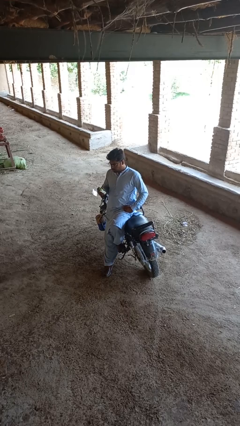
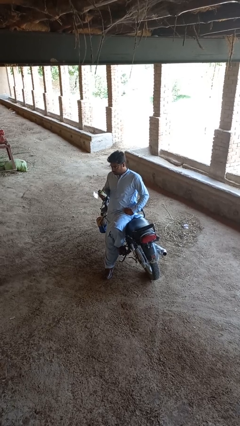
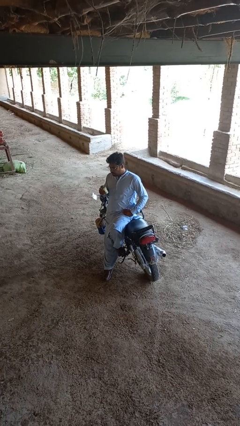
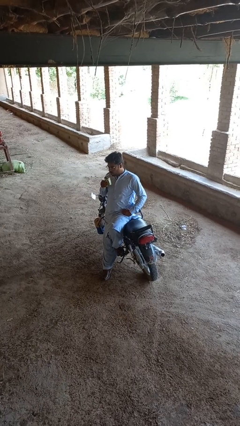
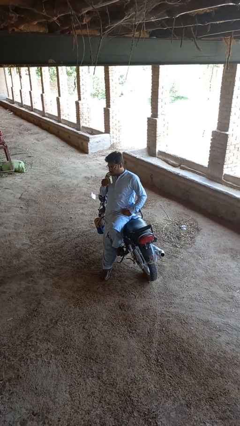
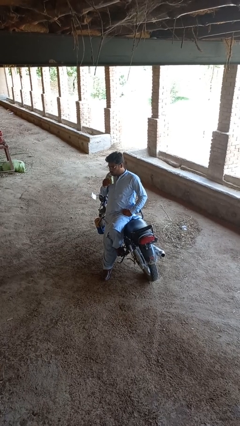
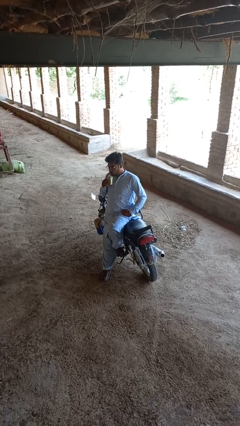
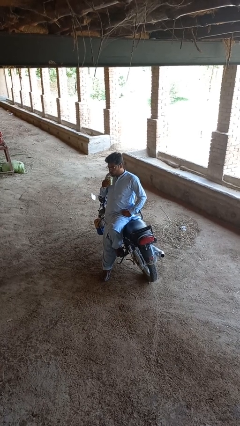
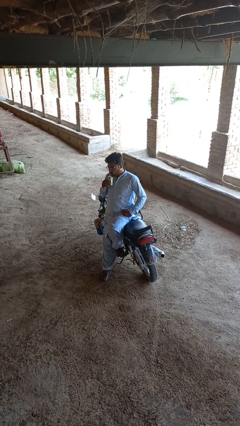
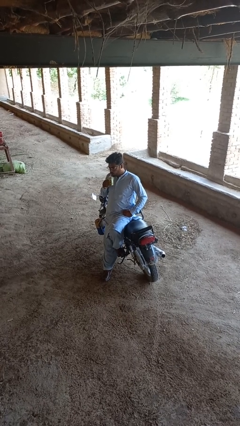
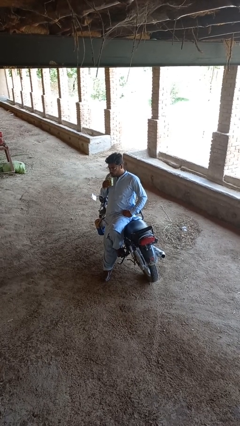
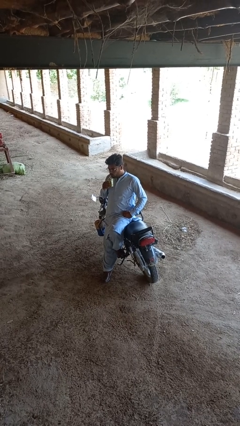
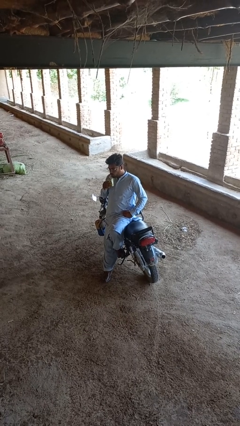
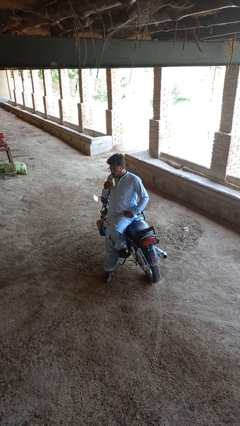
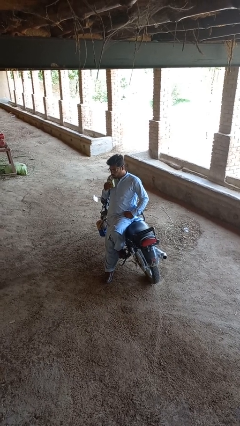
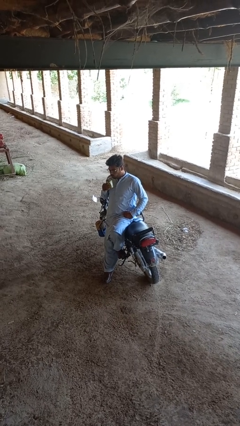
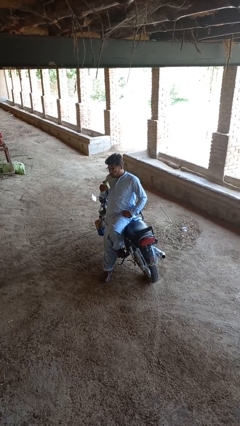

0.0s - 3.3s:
person drinks from straw

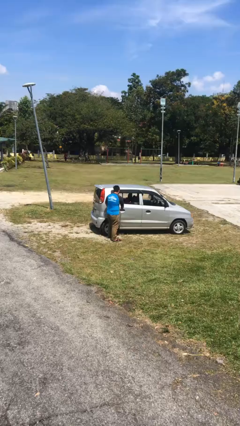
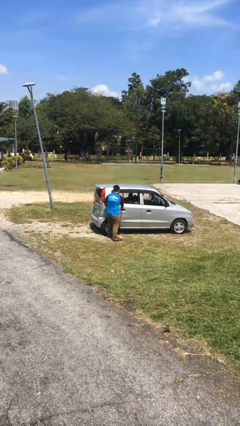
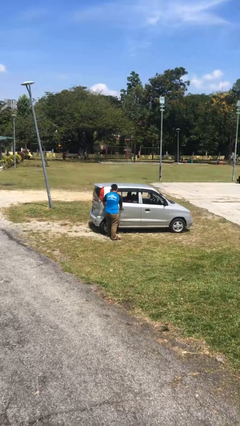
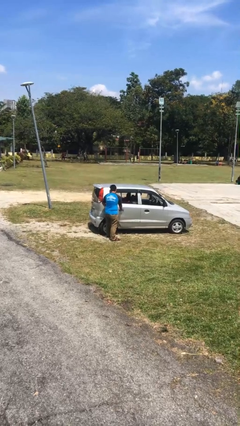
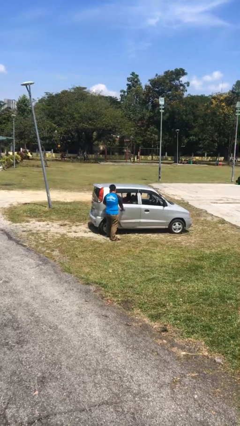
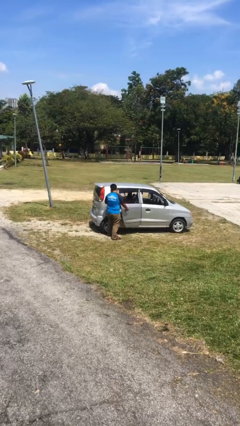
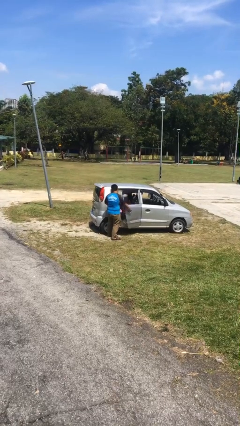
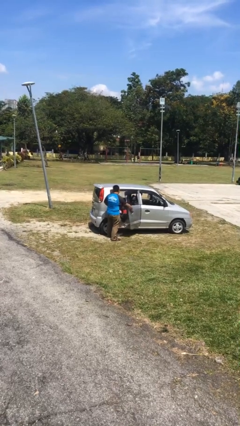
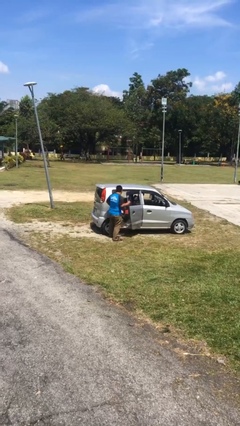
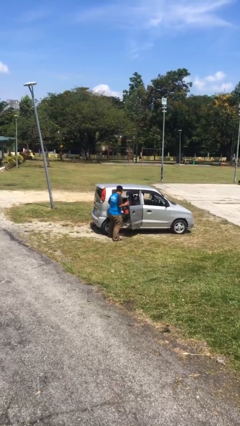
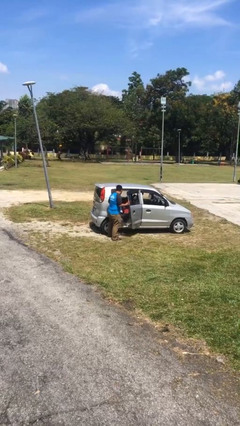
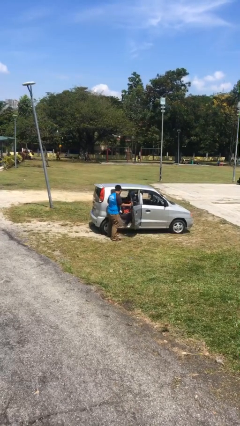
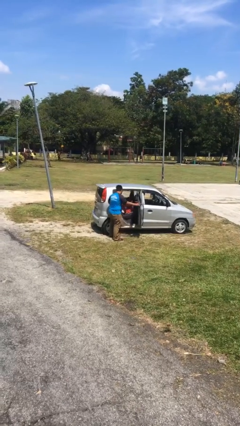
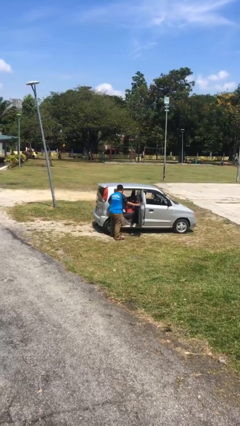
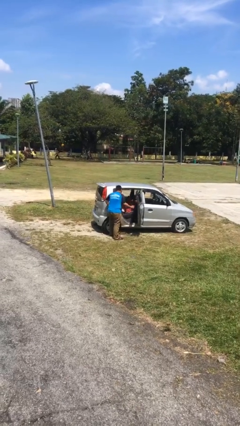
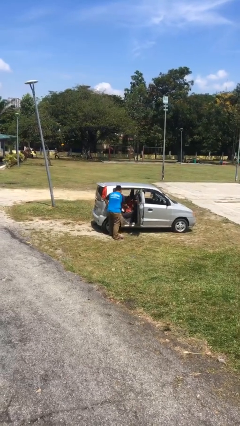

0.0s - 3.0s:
person opens car door

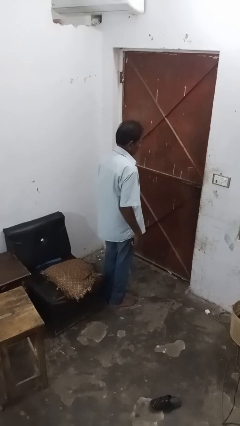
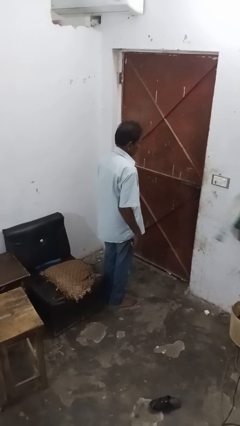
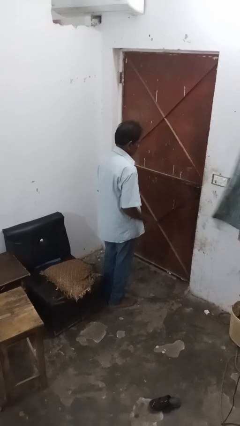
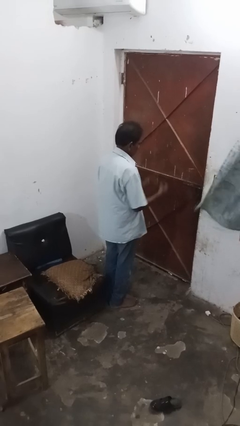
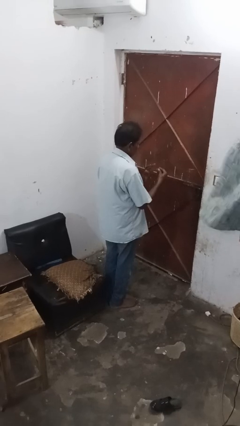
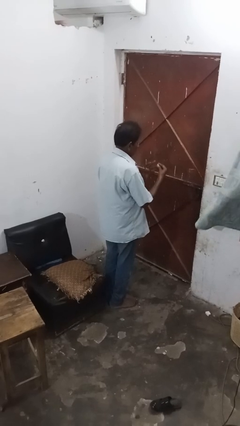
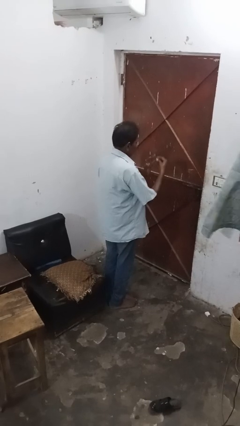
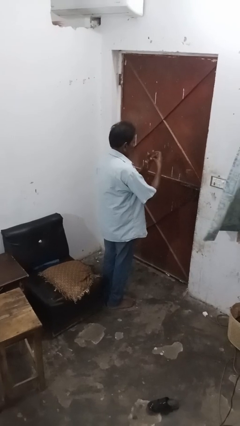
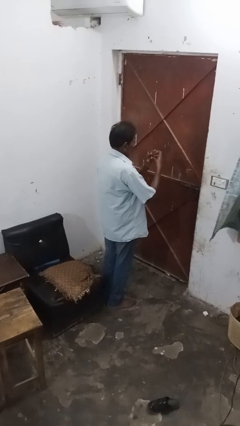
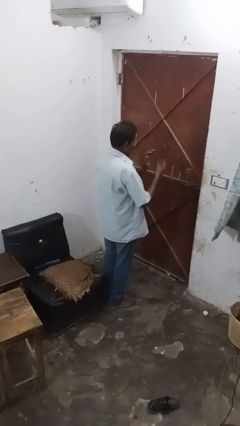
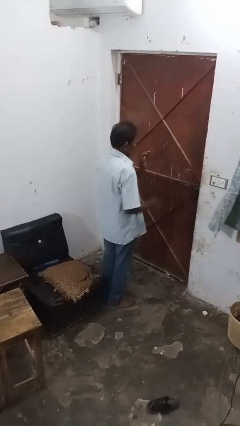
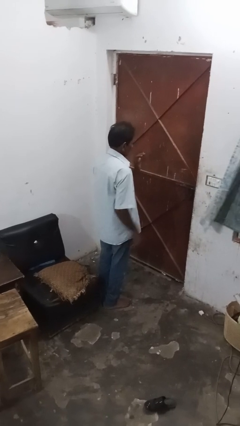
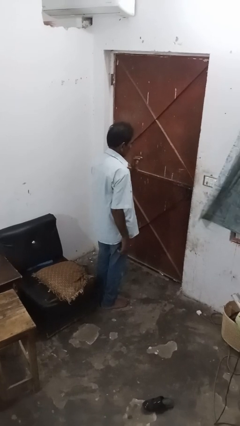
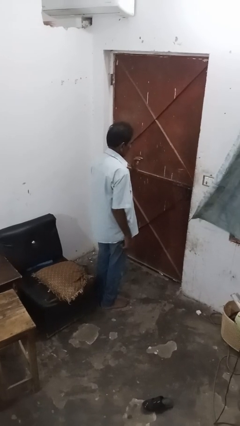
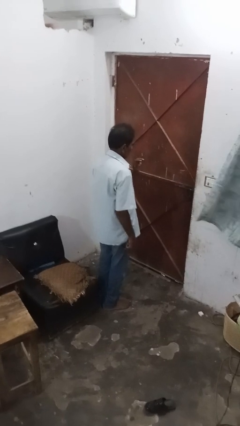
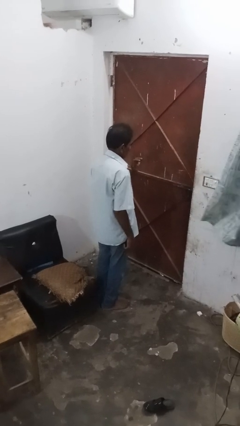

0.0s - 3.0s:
person puts on ring

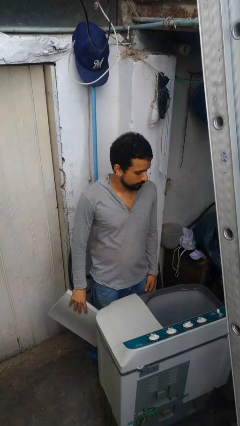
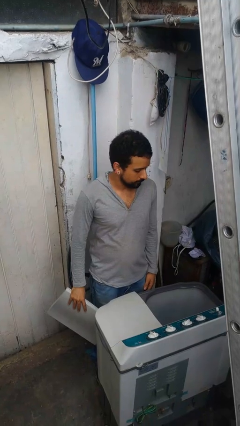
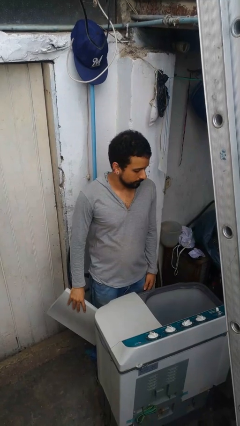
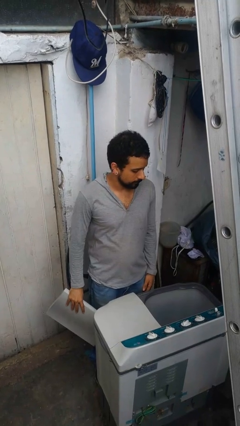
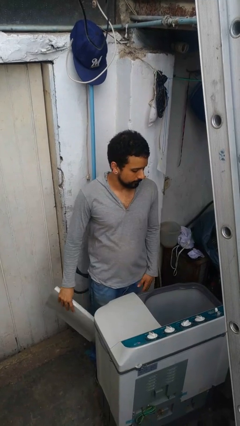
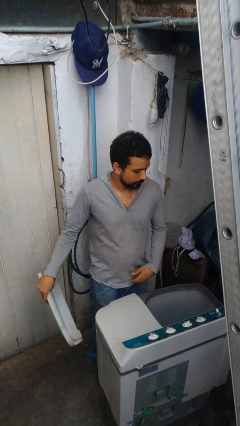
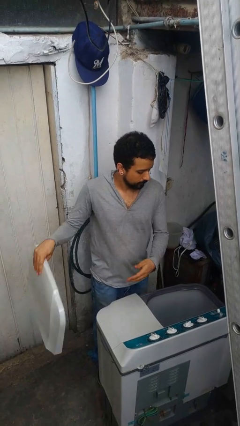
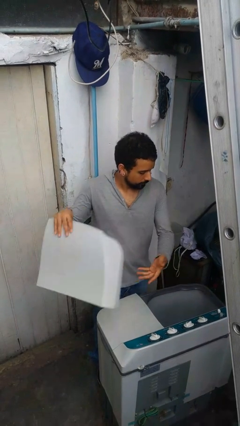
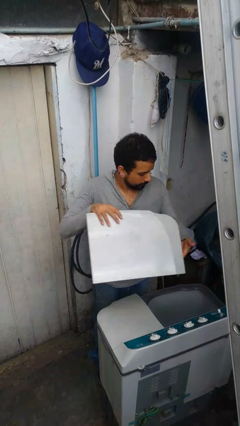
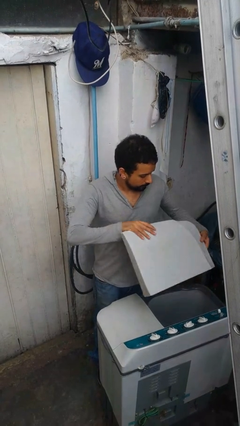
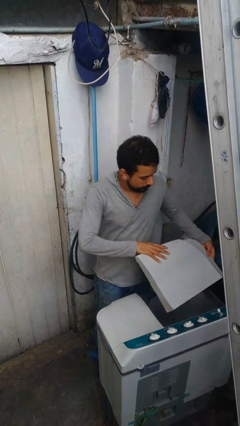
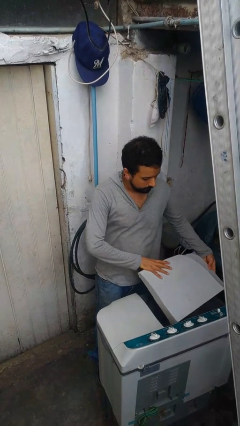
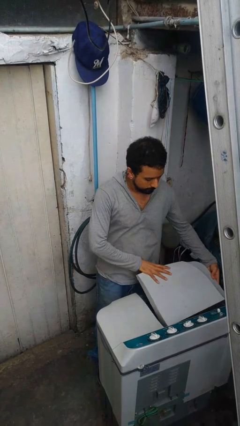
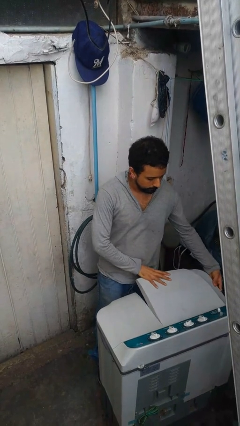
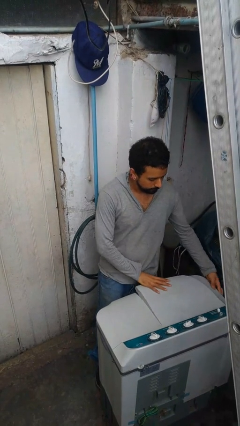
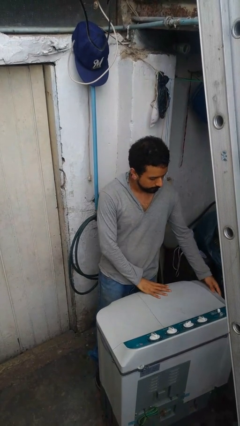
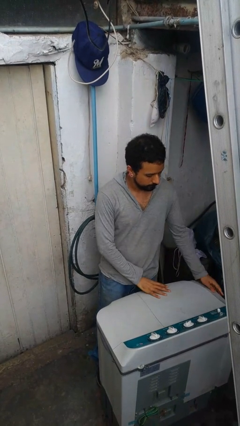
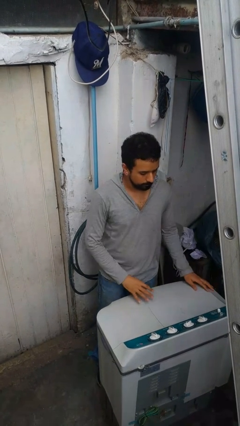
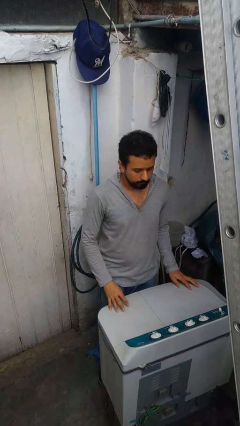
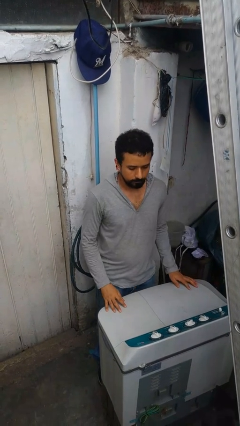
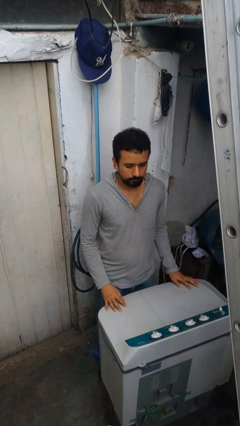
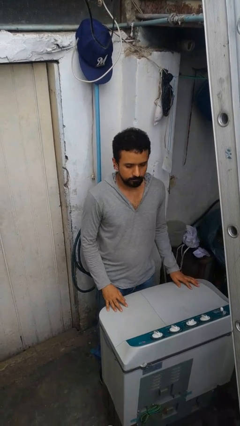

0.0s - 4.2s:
person closes clothes washer

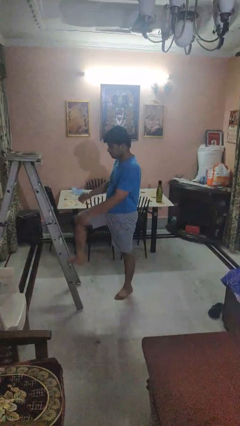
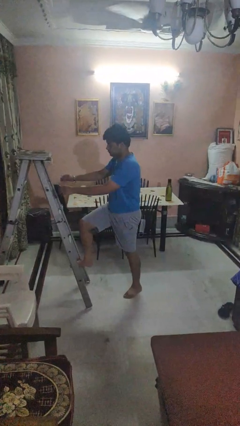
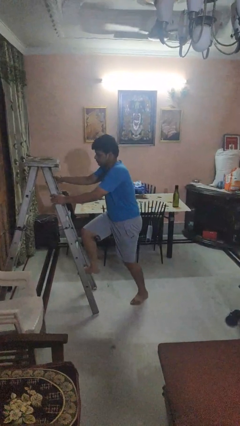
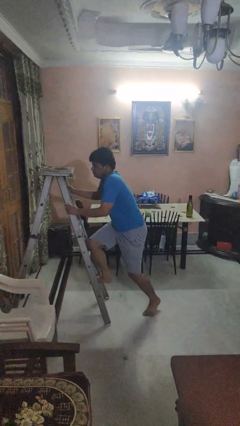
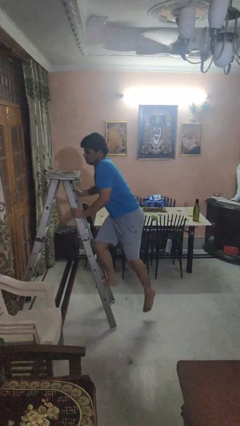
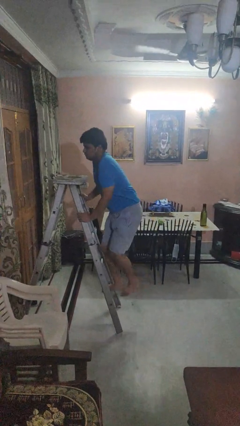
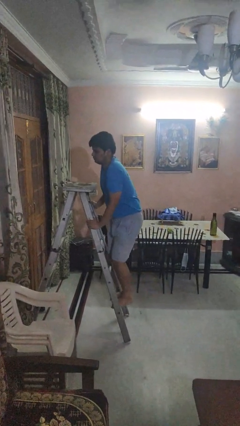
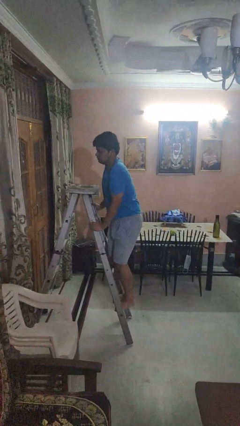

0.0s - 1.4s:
person climbs up ladder

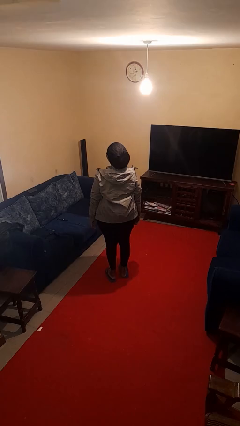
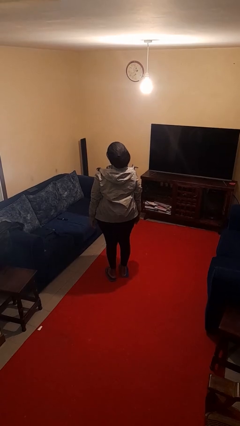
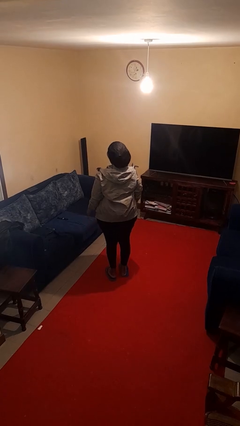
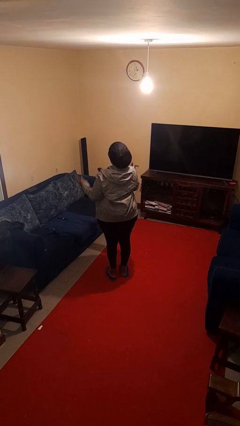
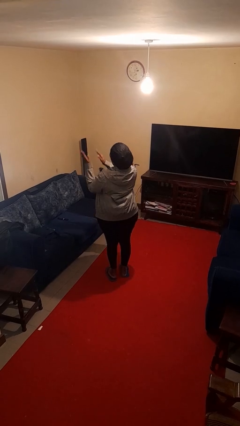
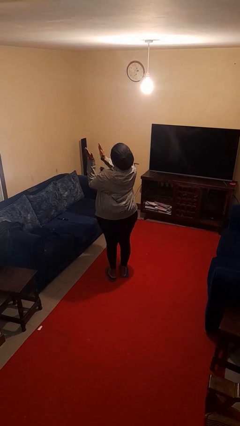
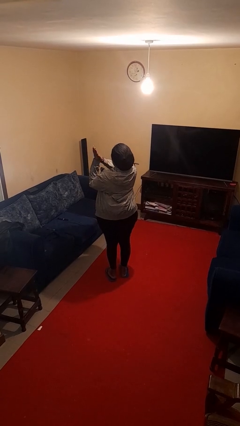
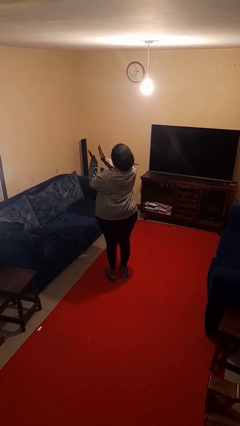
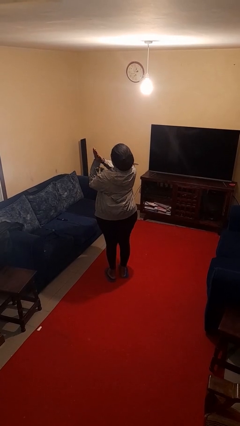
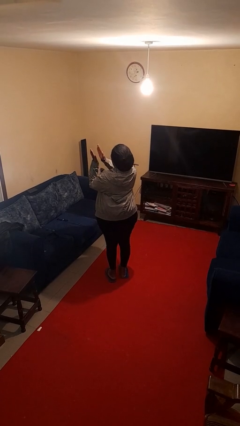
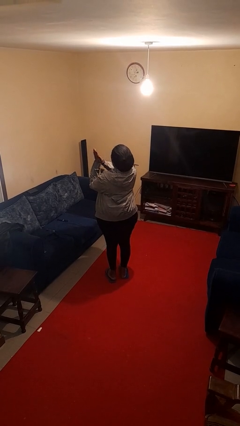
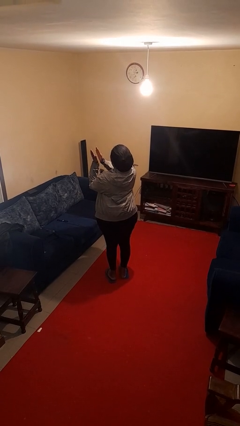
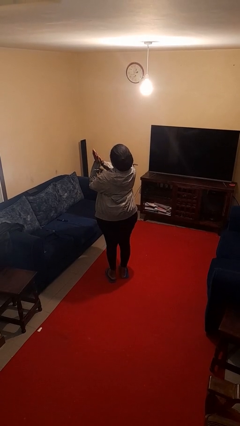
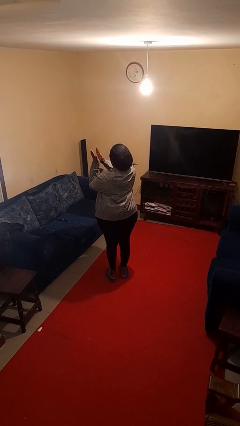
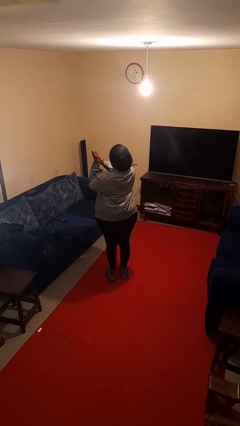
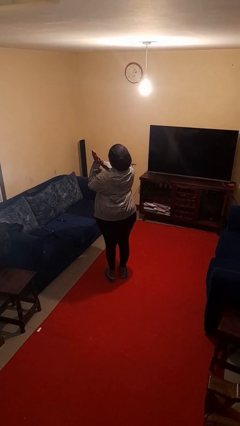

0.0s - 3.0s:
person claps hands
